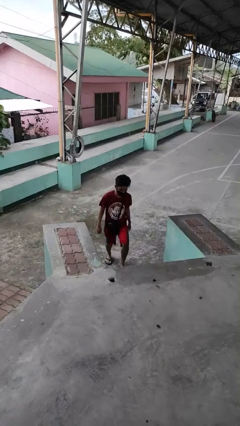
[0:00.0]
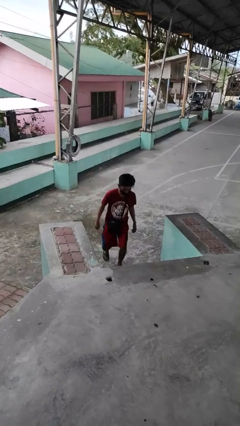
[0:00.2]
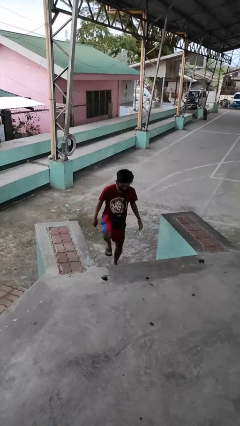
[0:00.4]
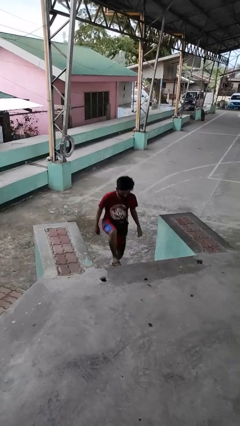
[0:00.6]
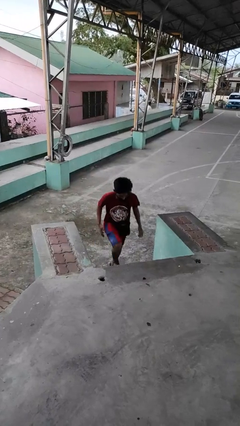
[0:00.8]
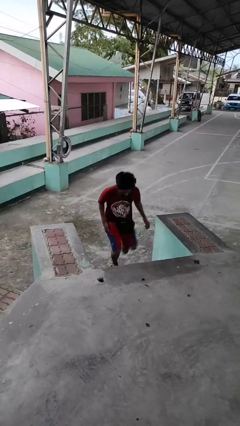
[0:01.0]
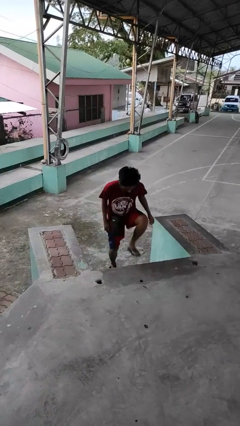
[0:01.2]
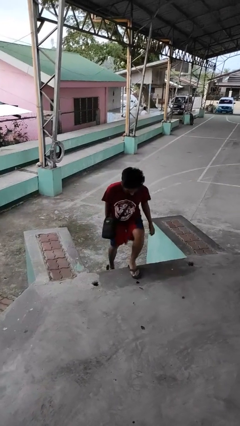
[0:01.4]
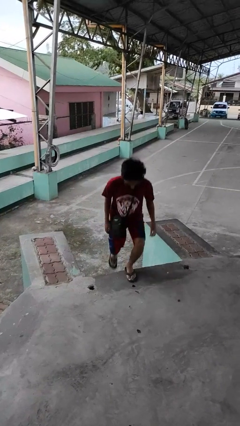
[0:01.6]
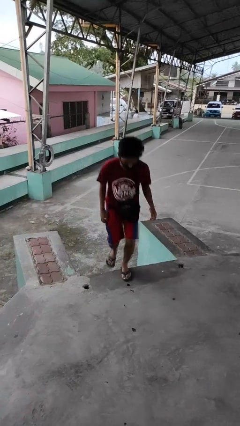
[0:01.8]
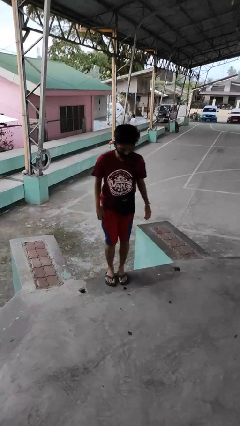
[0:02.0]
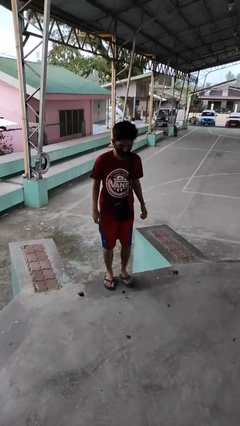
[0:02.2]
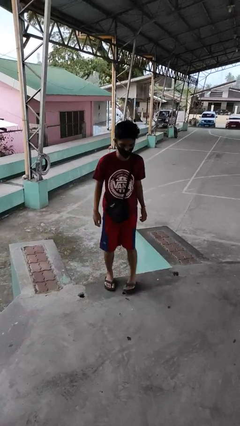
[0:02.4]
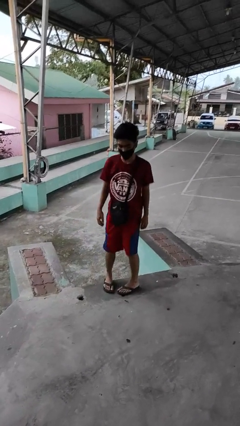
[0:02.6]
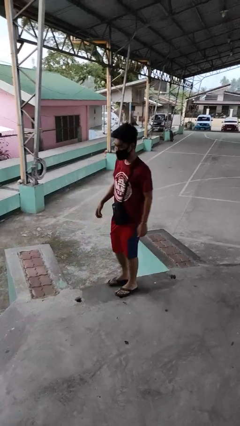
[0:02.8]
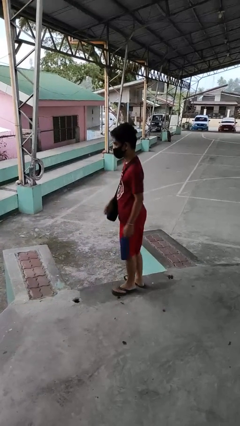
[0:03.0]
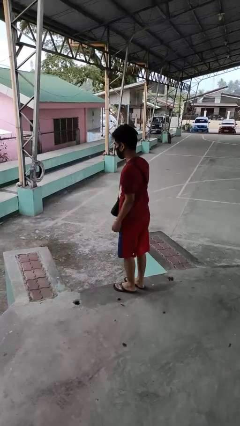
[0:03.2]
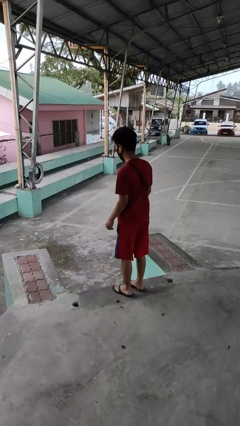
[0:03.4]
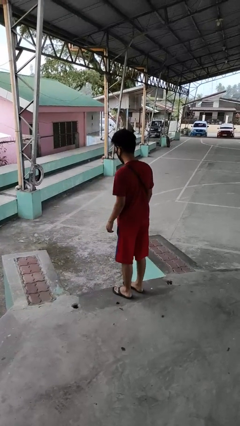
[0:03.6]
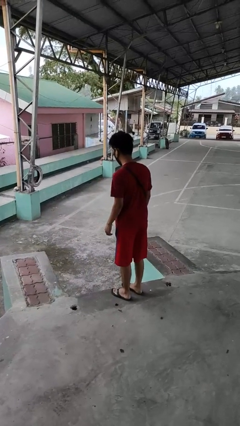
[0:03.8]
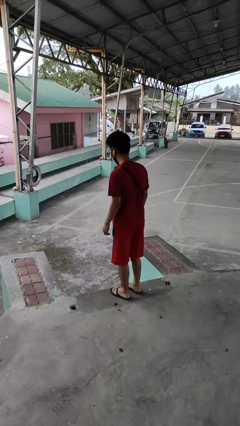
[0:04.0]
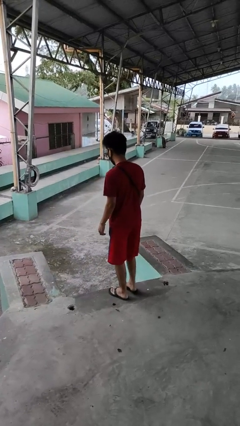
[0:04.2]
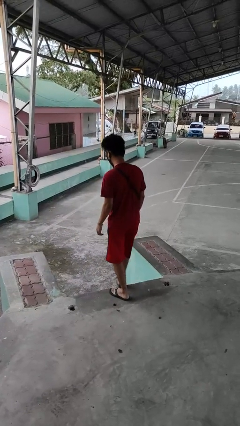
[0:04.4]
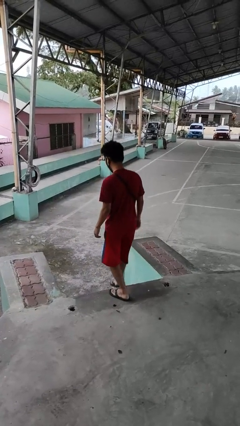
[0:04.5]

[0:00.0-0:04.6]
person climbs up stairs

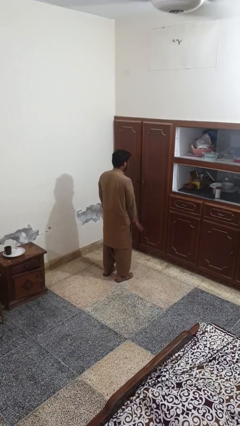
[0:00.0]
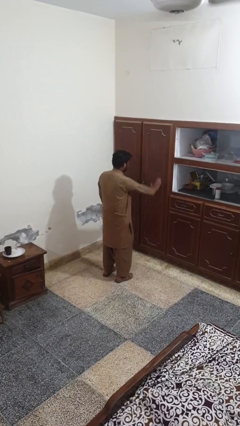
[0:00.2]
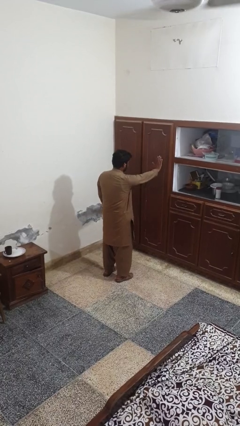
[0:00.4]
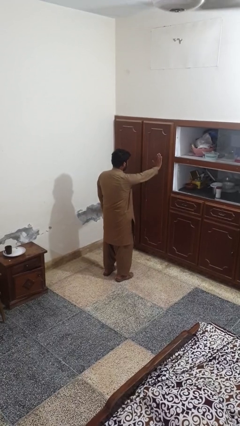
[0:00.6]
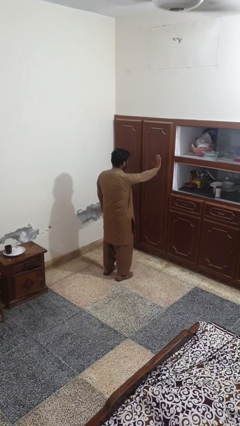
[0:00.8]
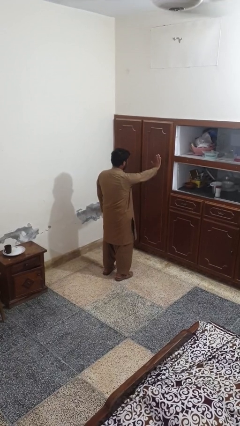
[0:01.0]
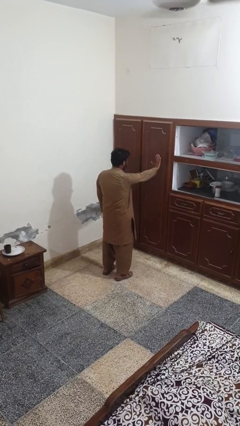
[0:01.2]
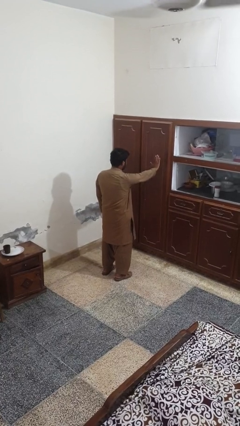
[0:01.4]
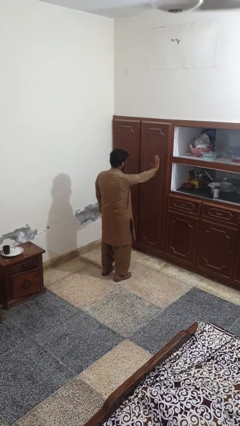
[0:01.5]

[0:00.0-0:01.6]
person gestures stop

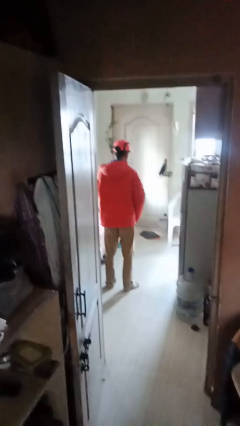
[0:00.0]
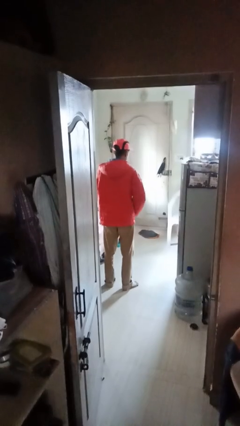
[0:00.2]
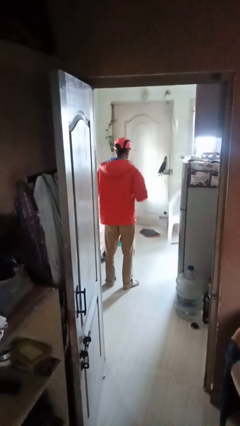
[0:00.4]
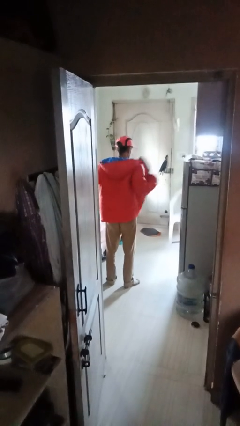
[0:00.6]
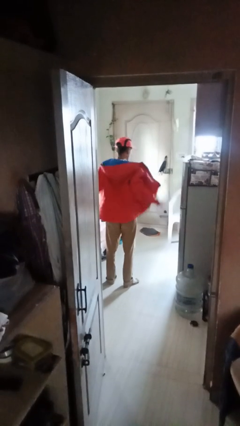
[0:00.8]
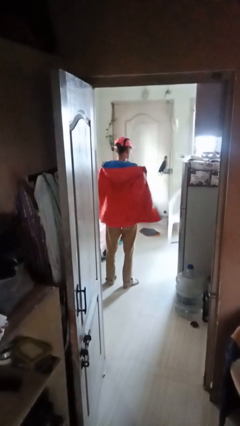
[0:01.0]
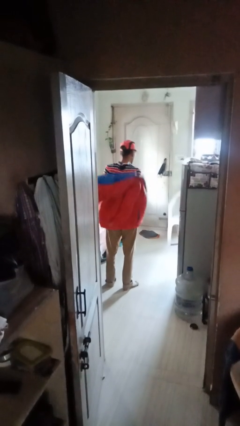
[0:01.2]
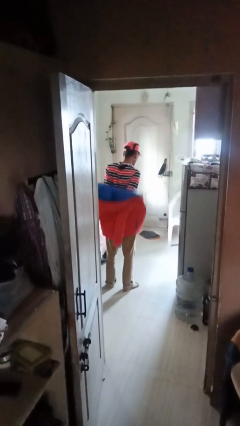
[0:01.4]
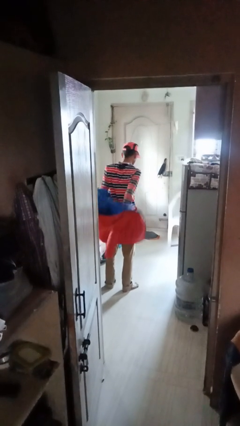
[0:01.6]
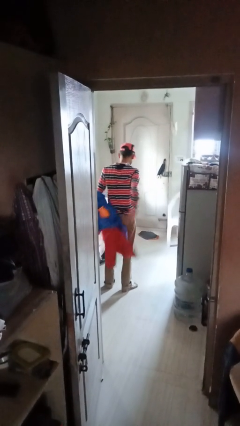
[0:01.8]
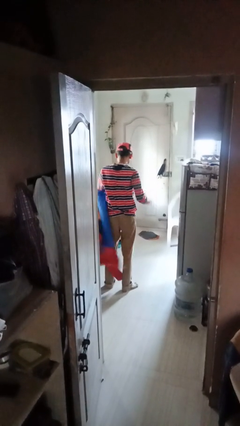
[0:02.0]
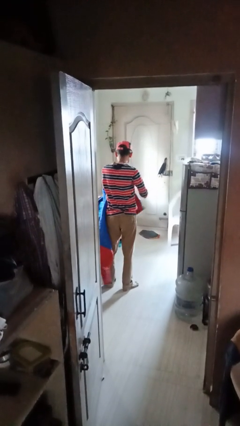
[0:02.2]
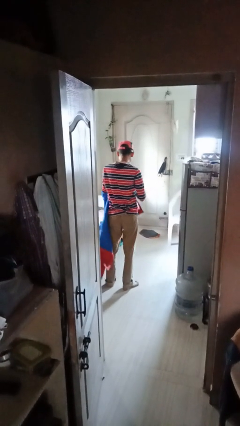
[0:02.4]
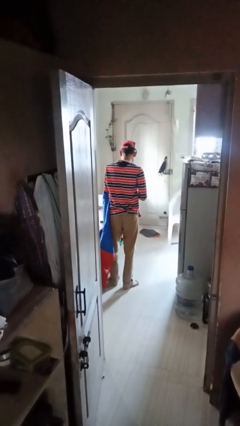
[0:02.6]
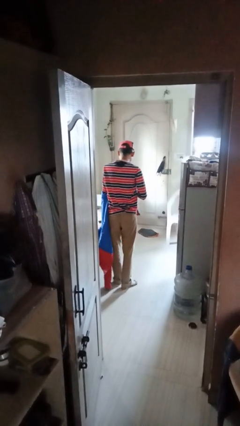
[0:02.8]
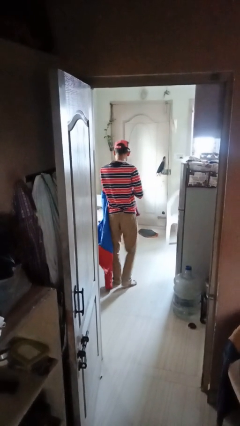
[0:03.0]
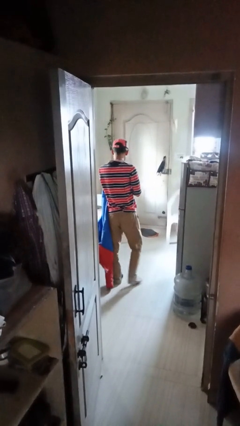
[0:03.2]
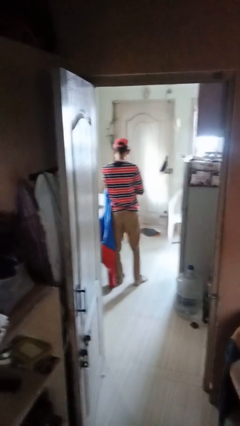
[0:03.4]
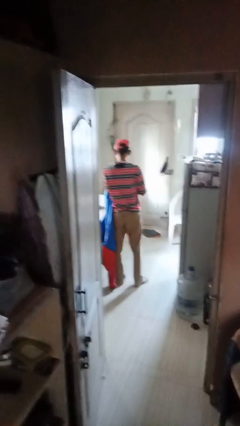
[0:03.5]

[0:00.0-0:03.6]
person takes off jacket

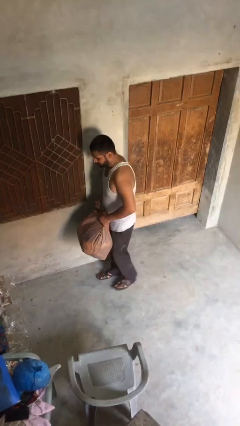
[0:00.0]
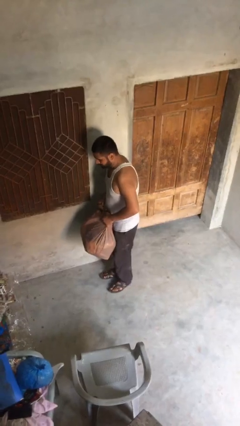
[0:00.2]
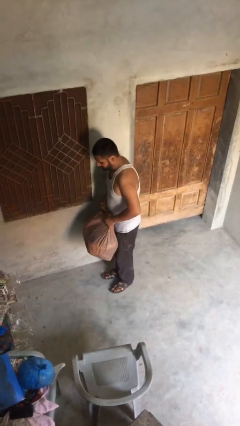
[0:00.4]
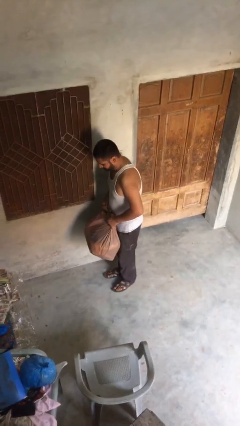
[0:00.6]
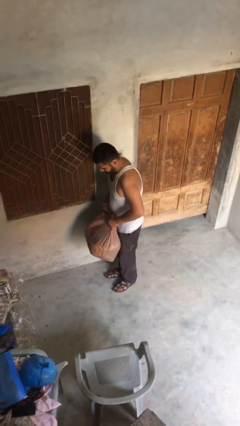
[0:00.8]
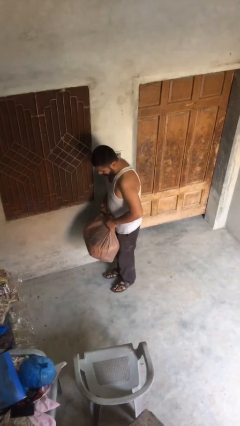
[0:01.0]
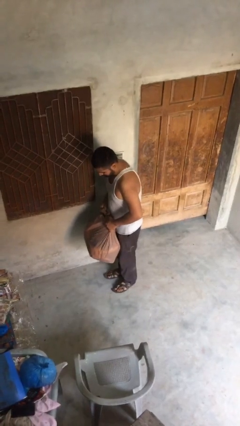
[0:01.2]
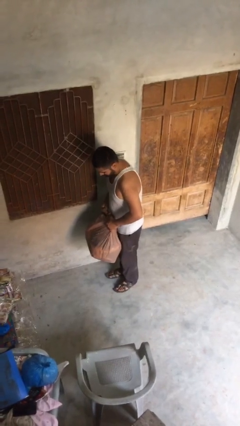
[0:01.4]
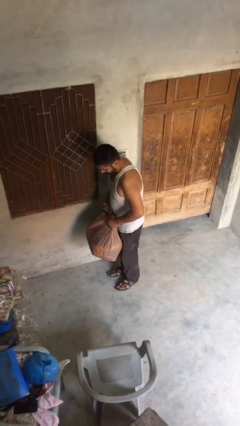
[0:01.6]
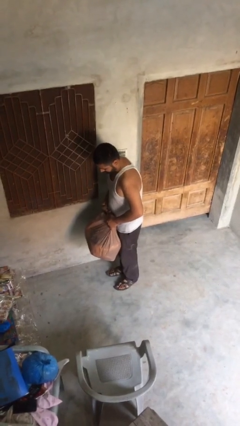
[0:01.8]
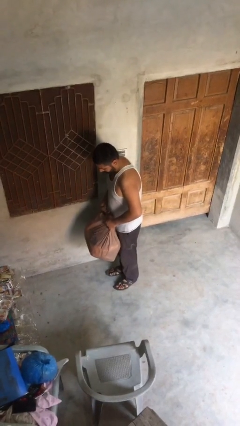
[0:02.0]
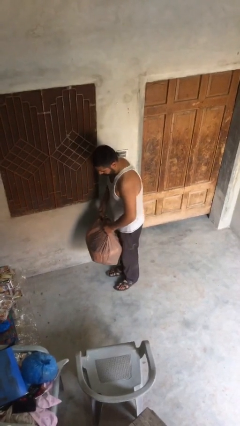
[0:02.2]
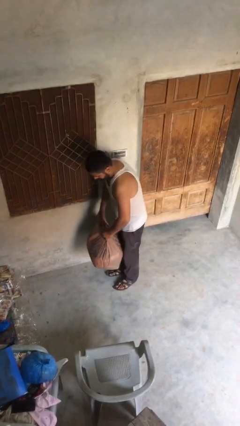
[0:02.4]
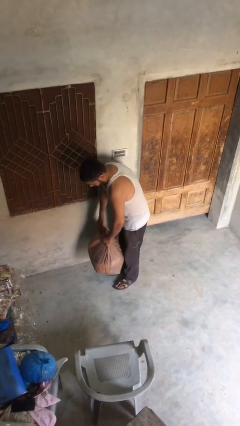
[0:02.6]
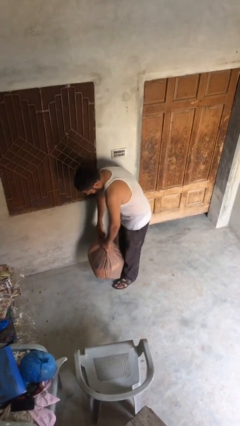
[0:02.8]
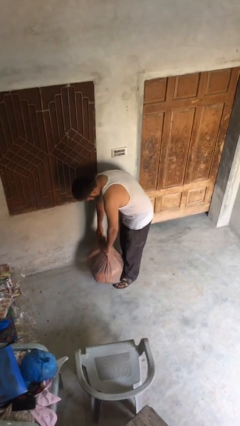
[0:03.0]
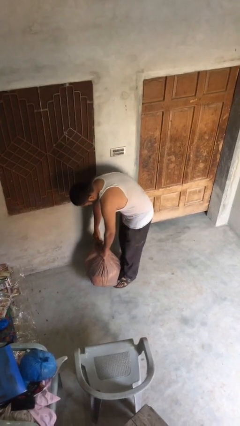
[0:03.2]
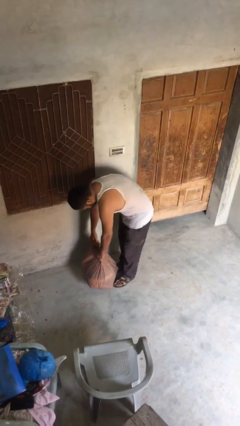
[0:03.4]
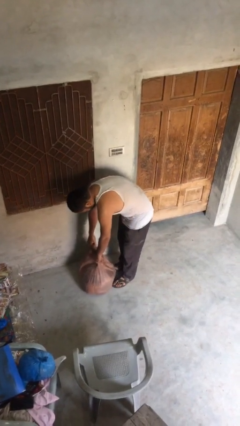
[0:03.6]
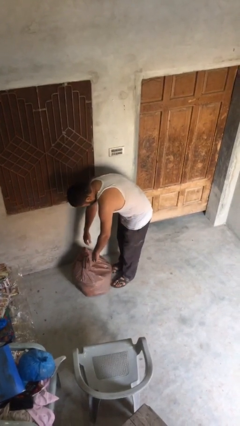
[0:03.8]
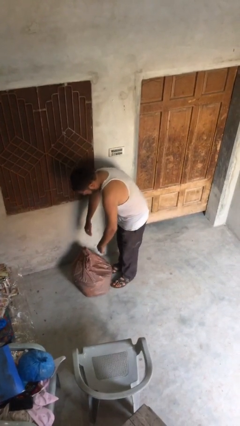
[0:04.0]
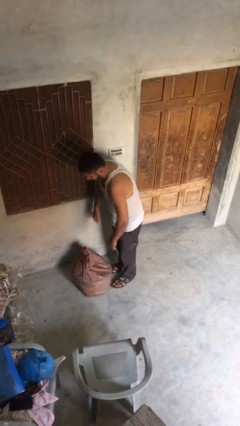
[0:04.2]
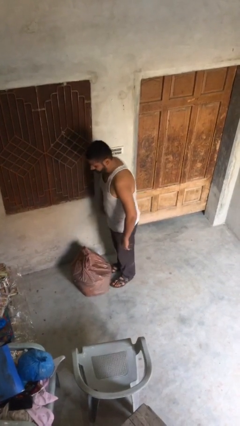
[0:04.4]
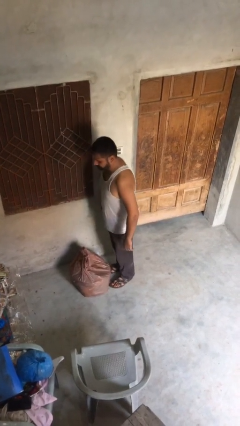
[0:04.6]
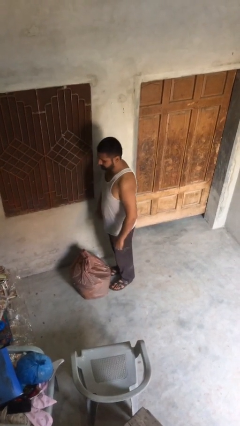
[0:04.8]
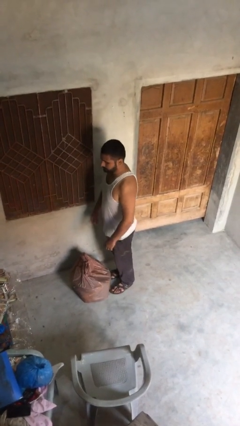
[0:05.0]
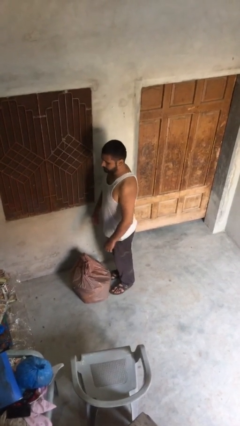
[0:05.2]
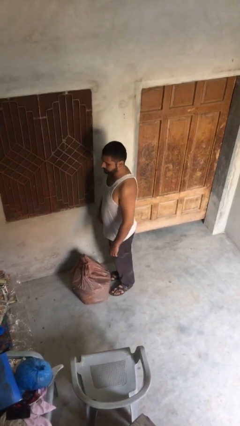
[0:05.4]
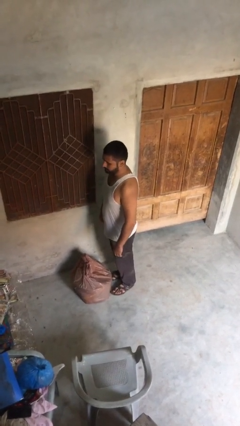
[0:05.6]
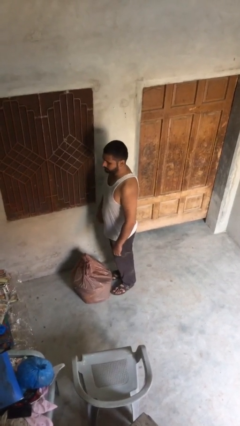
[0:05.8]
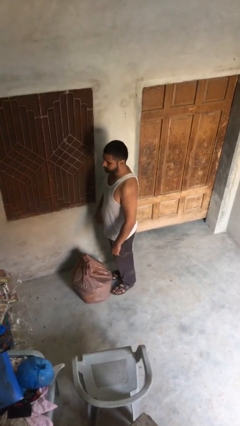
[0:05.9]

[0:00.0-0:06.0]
person puts down object on floor

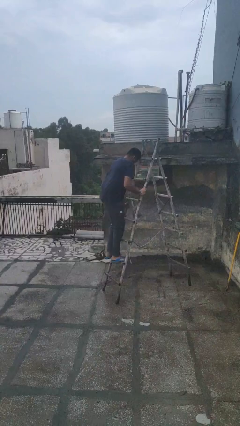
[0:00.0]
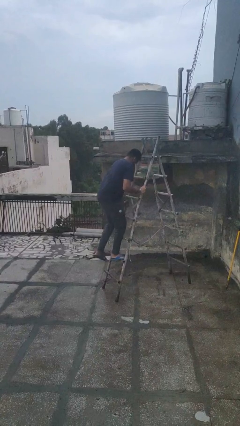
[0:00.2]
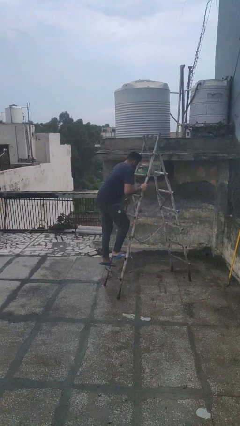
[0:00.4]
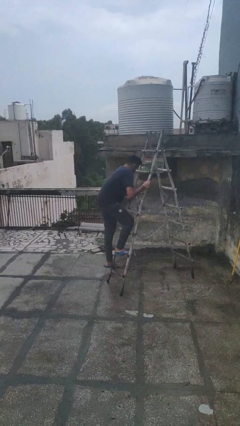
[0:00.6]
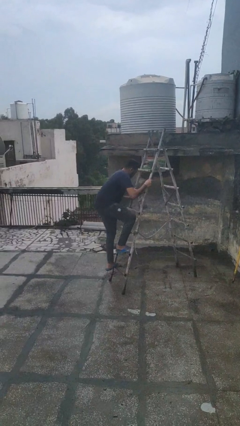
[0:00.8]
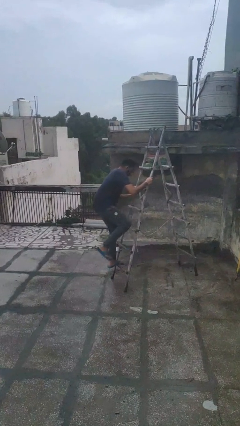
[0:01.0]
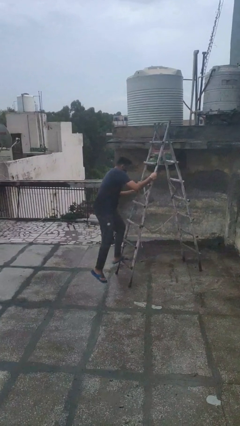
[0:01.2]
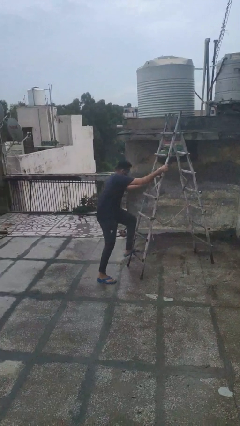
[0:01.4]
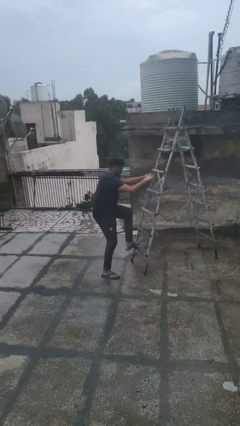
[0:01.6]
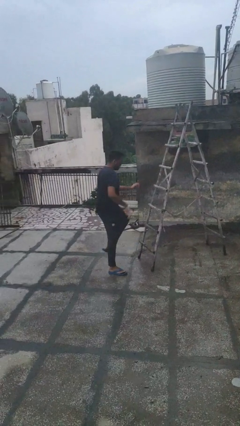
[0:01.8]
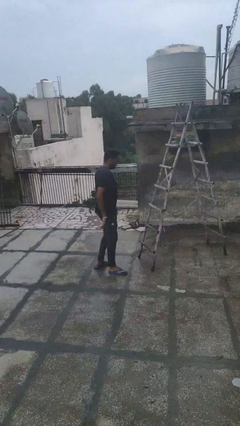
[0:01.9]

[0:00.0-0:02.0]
person climbs down ladder
